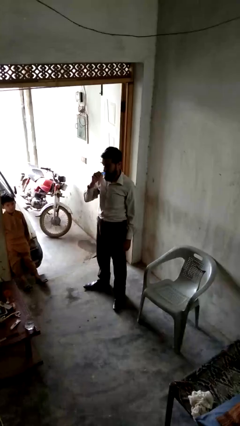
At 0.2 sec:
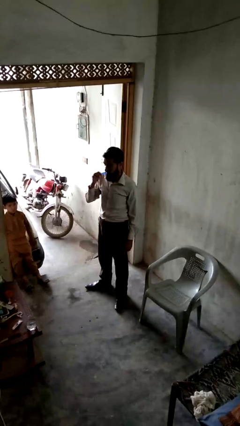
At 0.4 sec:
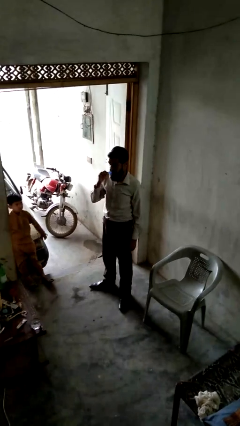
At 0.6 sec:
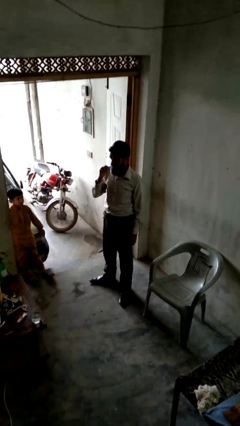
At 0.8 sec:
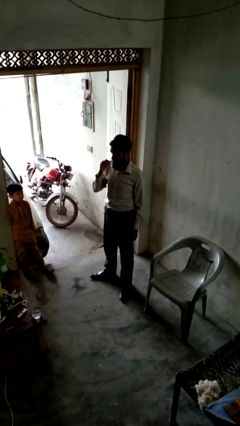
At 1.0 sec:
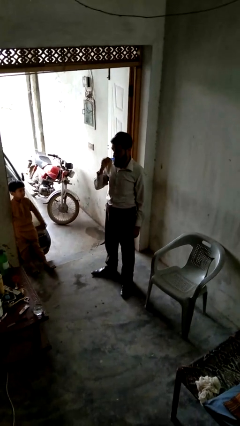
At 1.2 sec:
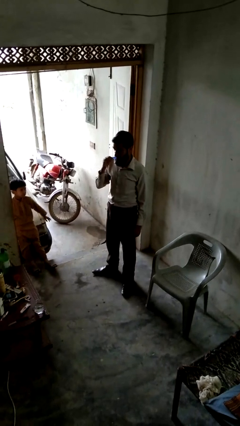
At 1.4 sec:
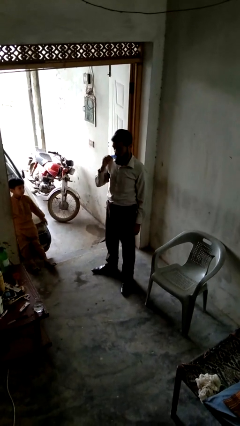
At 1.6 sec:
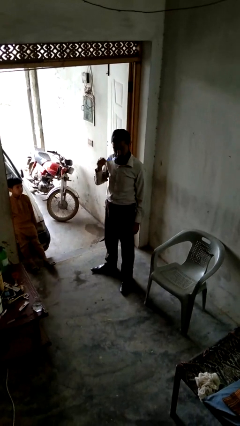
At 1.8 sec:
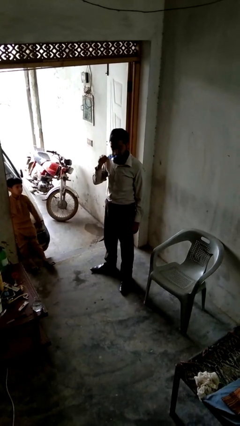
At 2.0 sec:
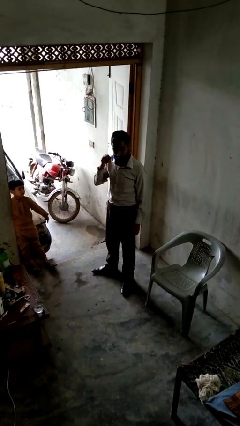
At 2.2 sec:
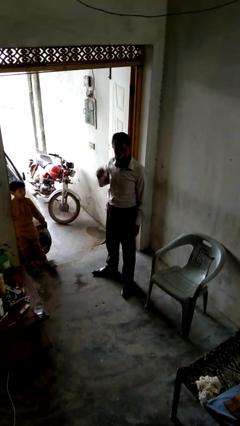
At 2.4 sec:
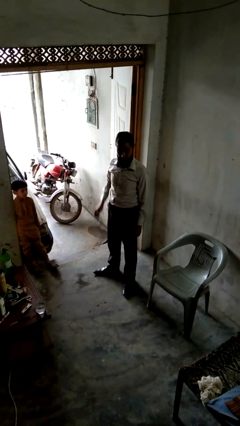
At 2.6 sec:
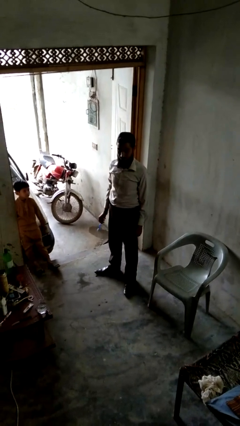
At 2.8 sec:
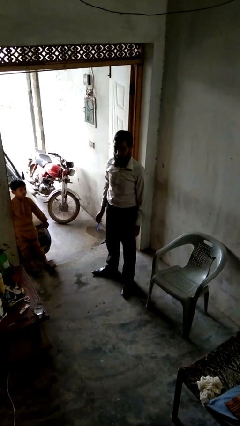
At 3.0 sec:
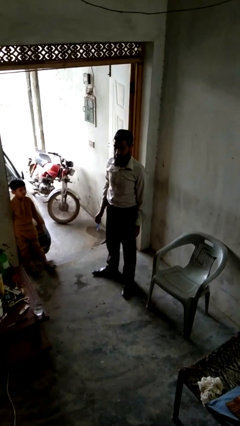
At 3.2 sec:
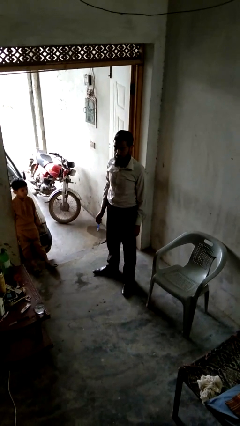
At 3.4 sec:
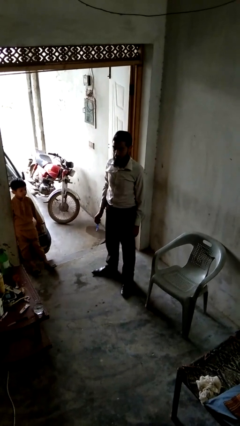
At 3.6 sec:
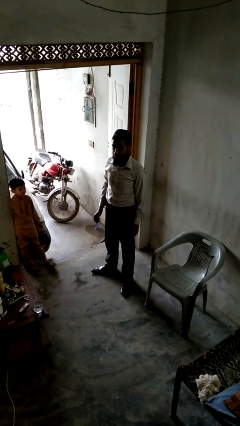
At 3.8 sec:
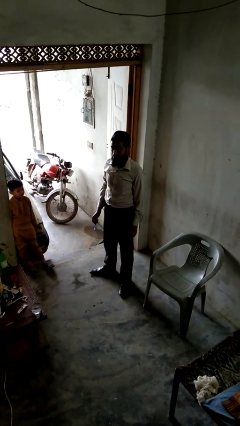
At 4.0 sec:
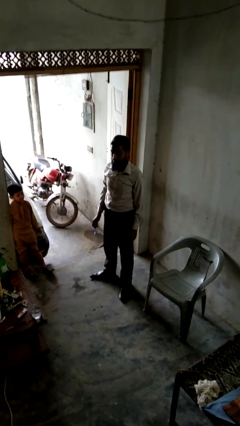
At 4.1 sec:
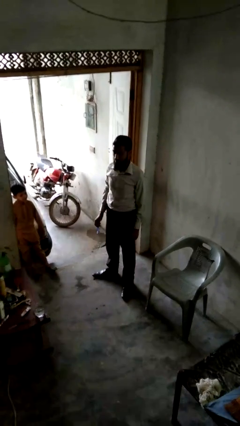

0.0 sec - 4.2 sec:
person brushes teeth

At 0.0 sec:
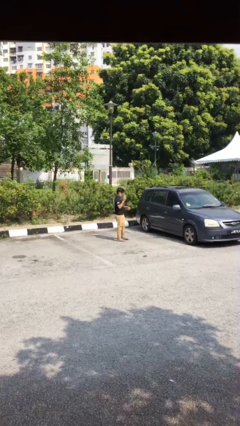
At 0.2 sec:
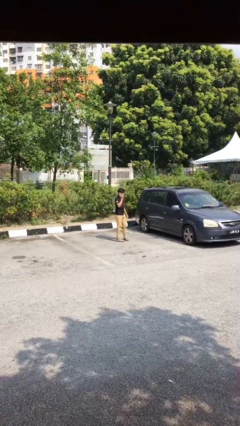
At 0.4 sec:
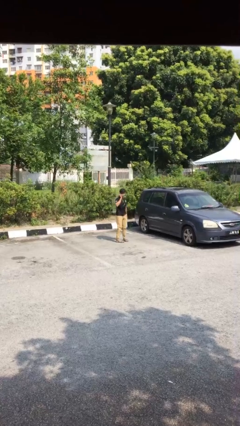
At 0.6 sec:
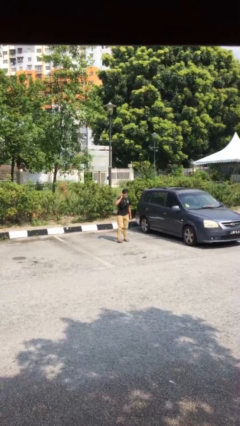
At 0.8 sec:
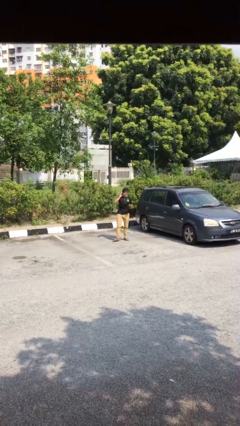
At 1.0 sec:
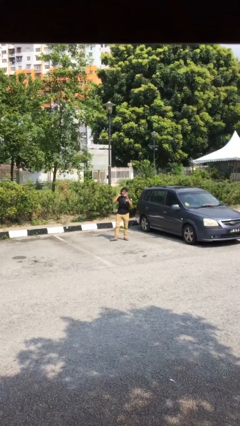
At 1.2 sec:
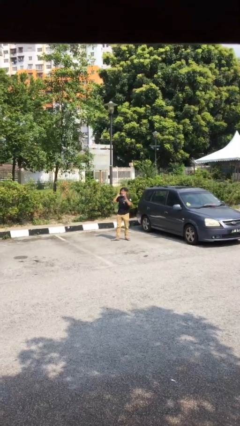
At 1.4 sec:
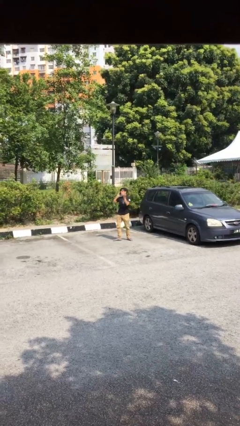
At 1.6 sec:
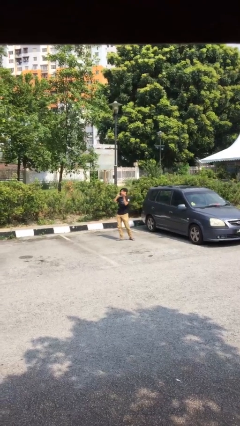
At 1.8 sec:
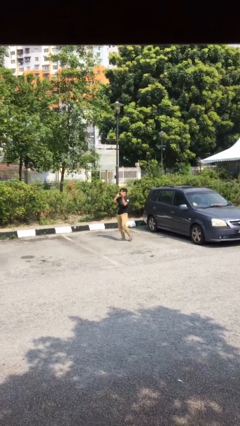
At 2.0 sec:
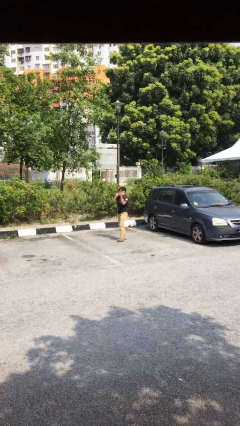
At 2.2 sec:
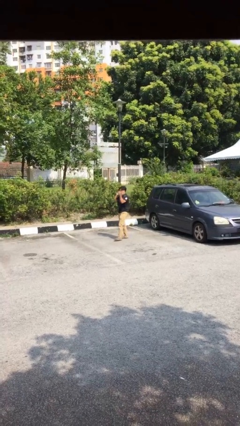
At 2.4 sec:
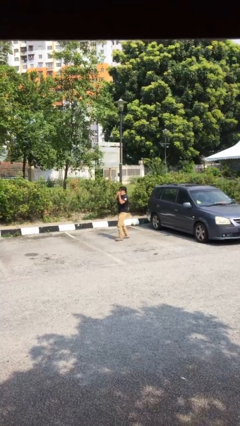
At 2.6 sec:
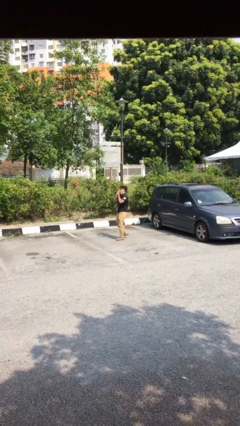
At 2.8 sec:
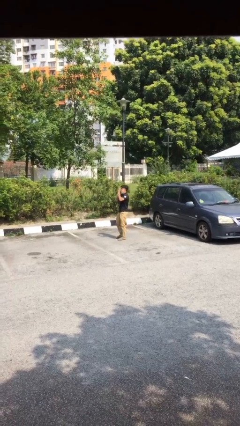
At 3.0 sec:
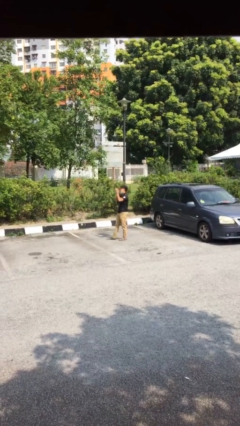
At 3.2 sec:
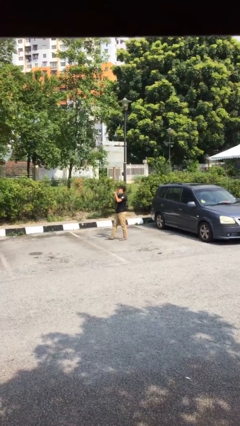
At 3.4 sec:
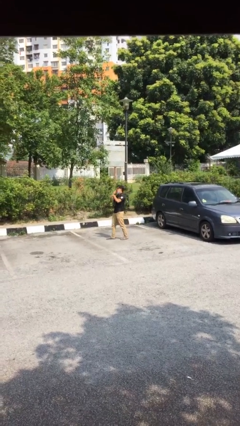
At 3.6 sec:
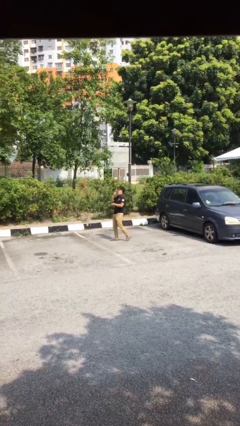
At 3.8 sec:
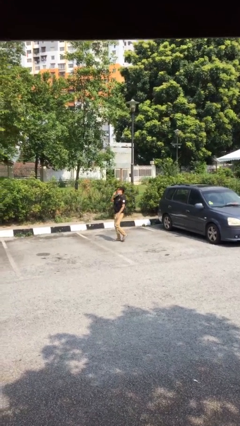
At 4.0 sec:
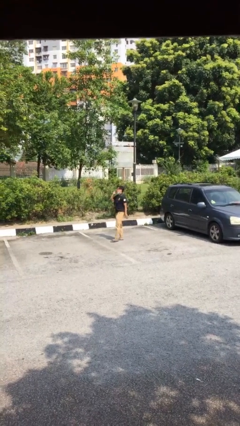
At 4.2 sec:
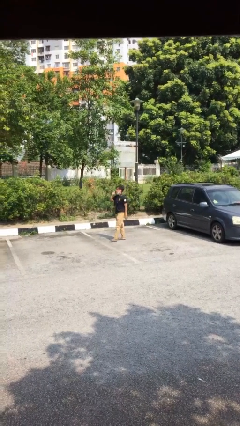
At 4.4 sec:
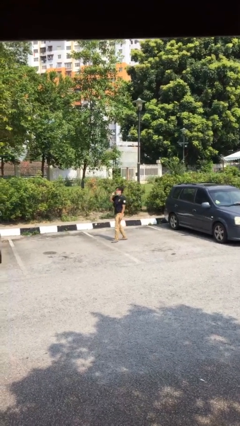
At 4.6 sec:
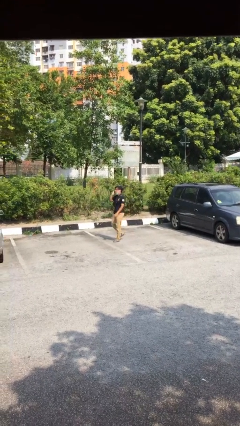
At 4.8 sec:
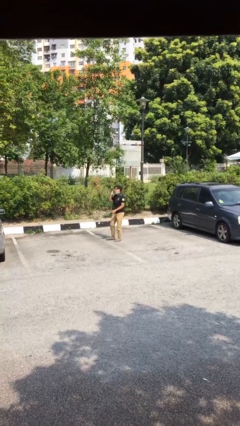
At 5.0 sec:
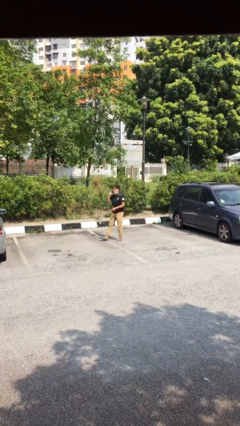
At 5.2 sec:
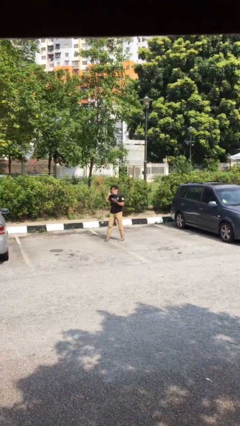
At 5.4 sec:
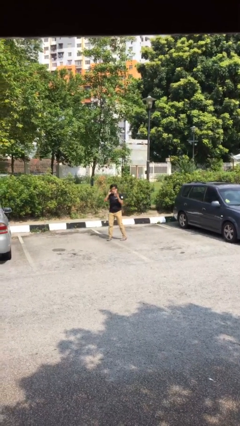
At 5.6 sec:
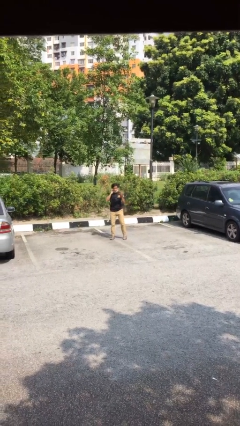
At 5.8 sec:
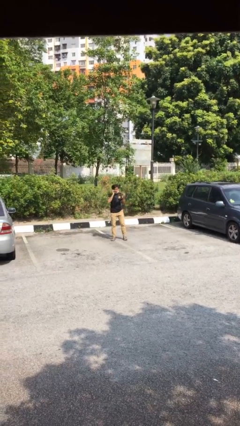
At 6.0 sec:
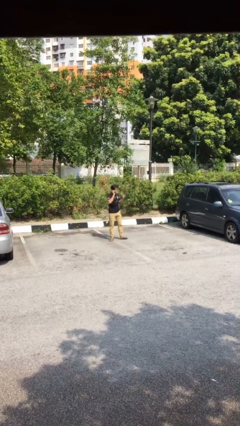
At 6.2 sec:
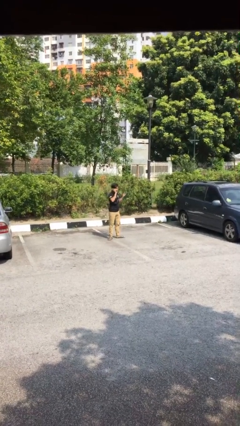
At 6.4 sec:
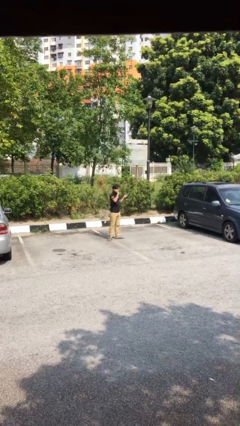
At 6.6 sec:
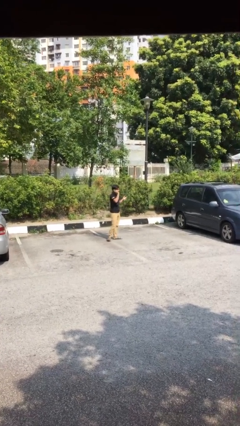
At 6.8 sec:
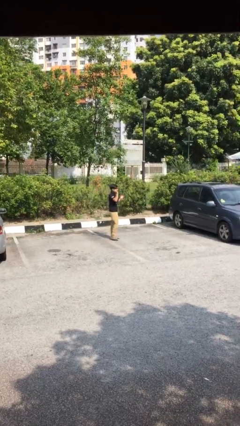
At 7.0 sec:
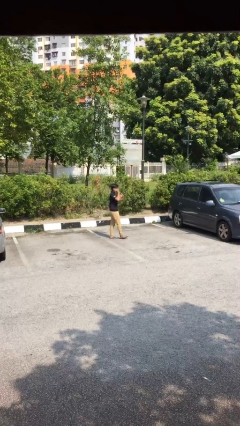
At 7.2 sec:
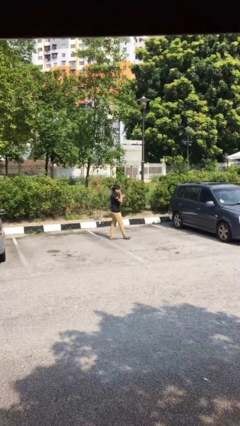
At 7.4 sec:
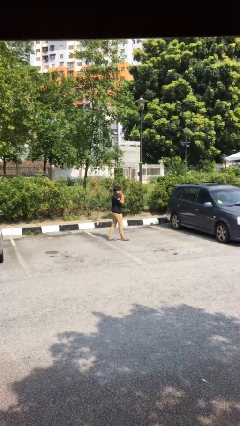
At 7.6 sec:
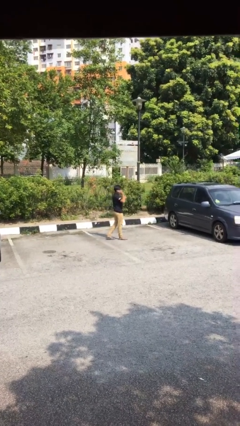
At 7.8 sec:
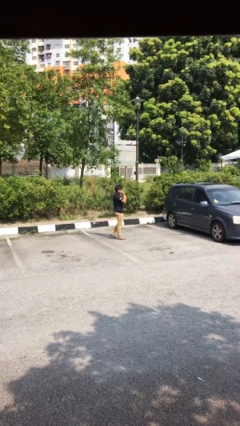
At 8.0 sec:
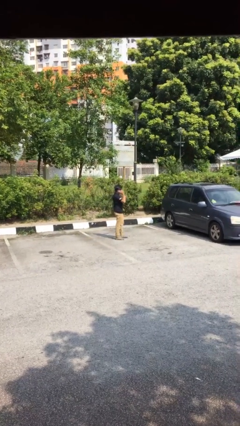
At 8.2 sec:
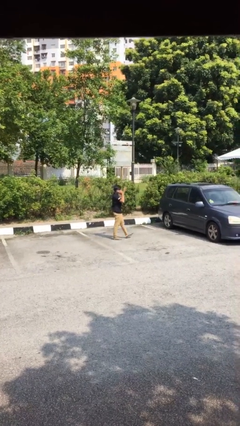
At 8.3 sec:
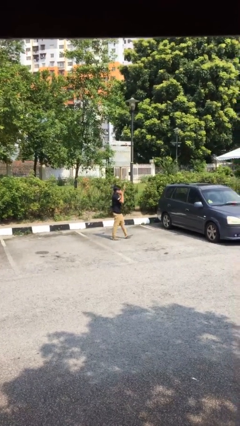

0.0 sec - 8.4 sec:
person talks on phone

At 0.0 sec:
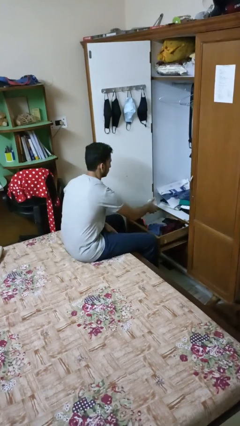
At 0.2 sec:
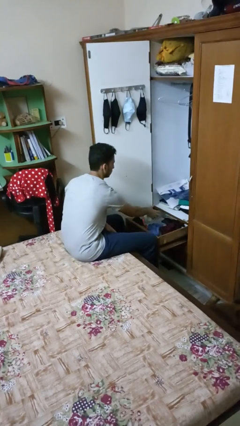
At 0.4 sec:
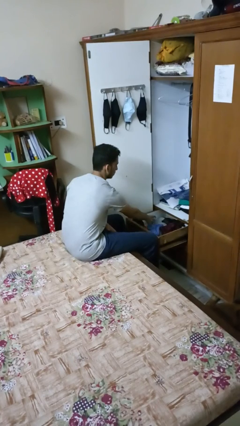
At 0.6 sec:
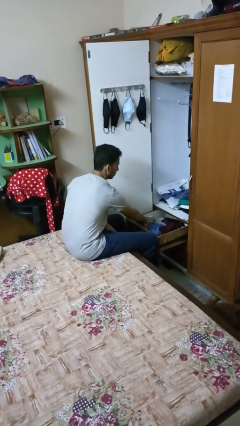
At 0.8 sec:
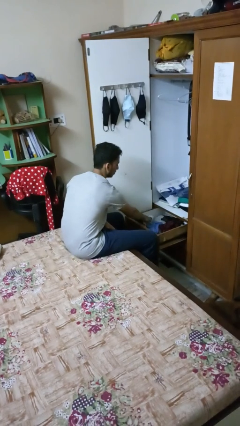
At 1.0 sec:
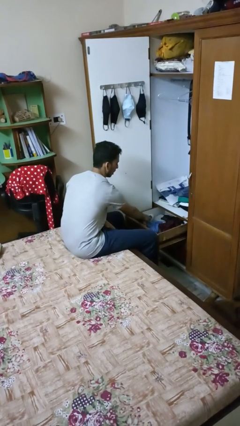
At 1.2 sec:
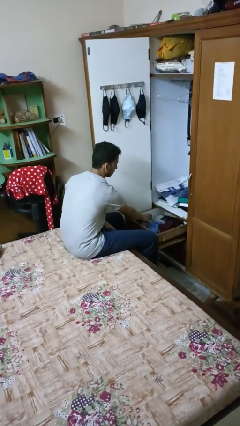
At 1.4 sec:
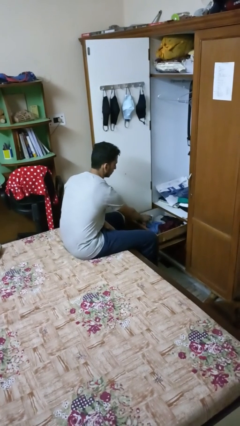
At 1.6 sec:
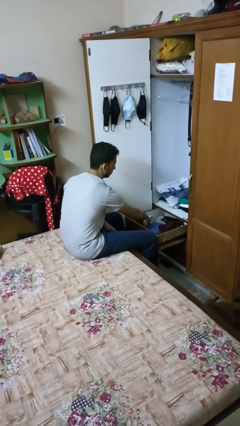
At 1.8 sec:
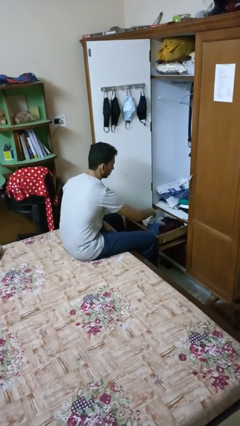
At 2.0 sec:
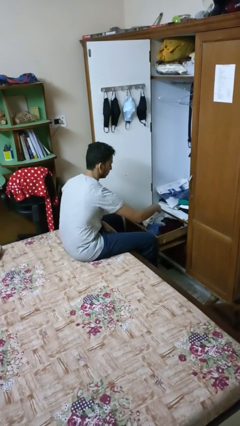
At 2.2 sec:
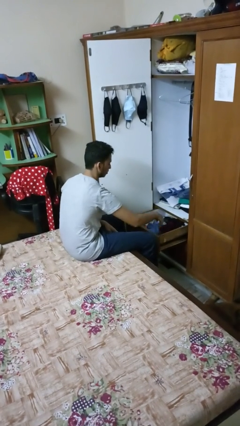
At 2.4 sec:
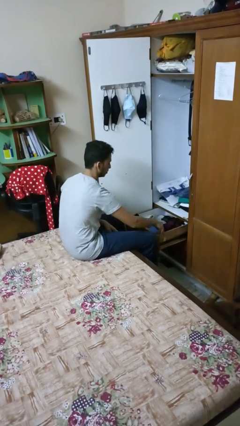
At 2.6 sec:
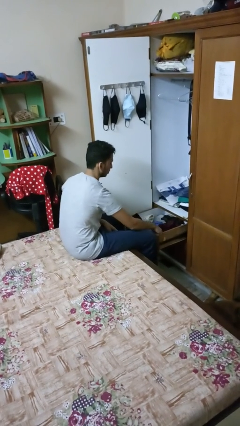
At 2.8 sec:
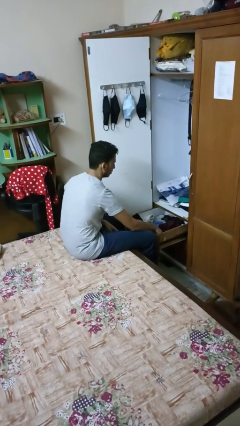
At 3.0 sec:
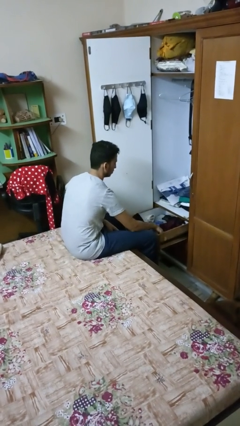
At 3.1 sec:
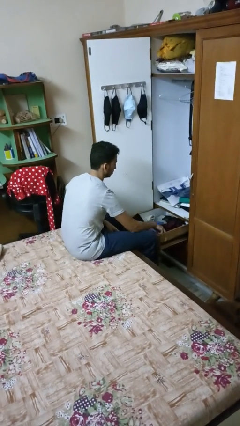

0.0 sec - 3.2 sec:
person puts clothes into dresser

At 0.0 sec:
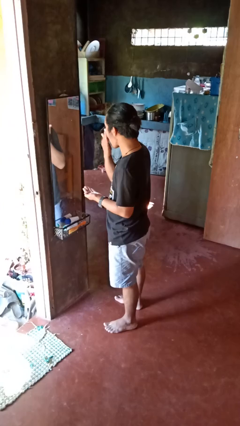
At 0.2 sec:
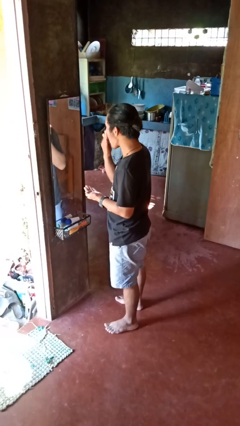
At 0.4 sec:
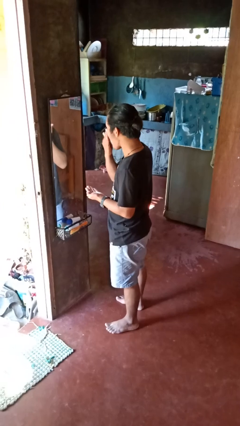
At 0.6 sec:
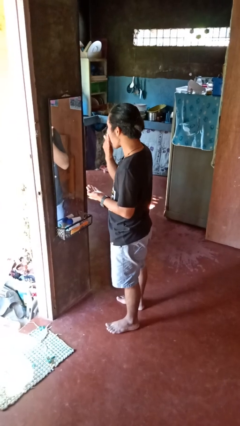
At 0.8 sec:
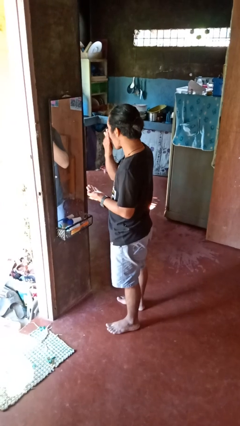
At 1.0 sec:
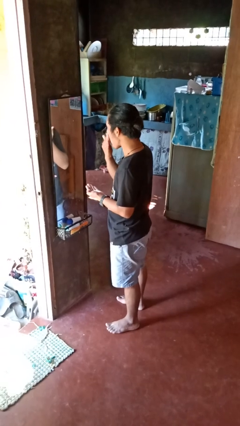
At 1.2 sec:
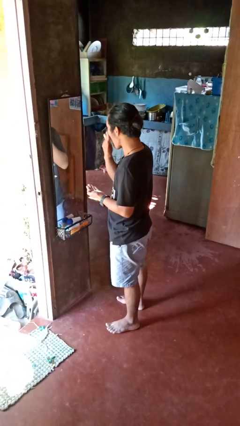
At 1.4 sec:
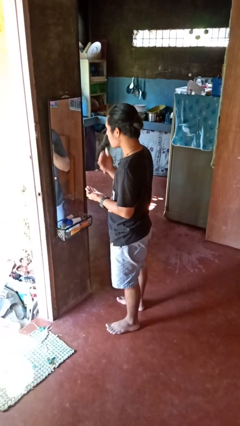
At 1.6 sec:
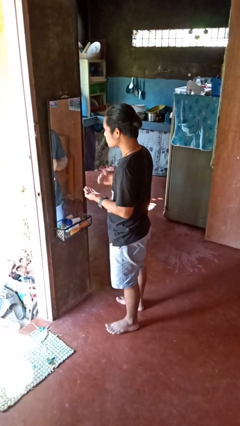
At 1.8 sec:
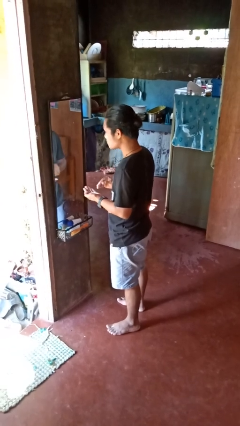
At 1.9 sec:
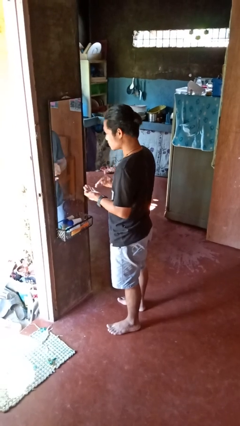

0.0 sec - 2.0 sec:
person applies foundation makeup

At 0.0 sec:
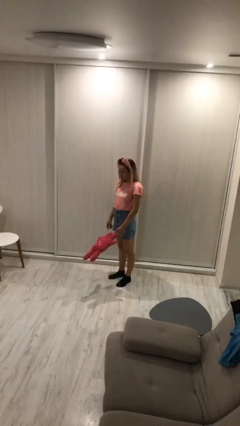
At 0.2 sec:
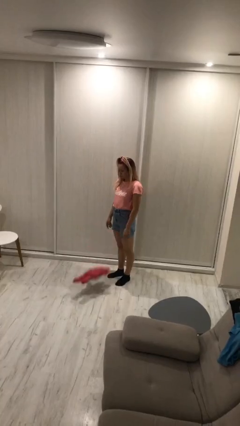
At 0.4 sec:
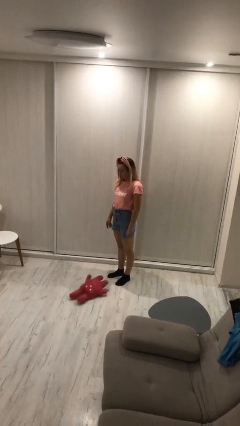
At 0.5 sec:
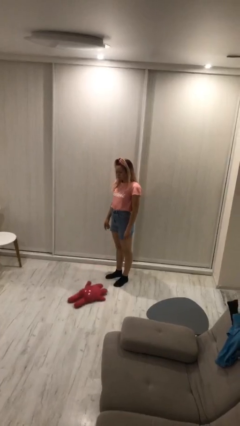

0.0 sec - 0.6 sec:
person throws object to ground
